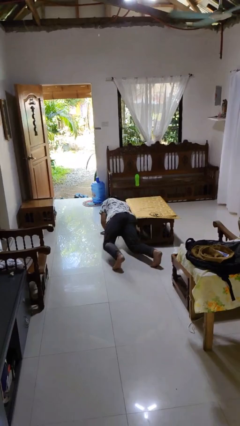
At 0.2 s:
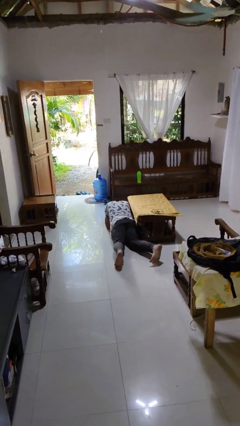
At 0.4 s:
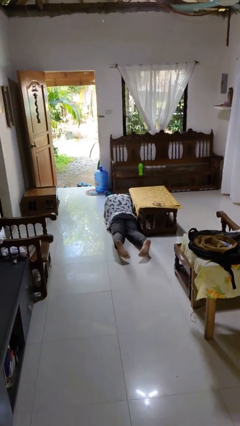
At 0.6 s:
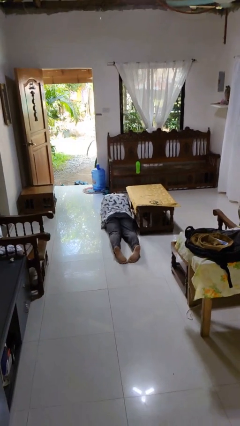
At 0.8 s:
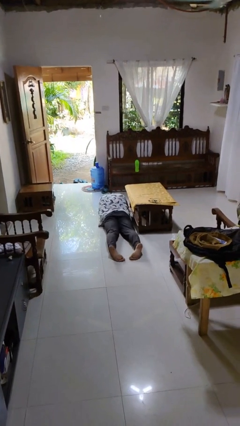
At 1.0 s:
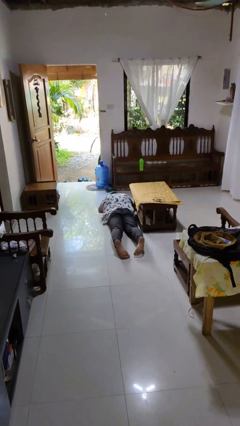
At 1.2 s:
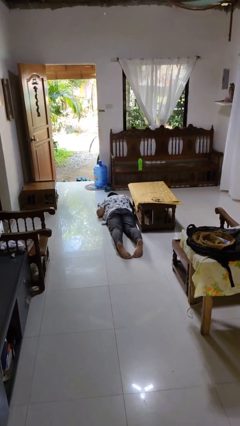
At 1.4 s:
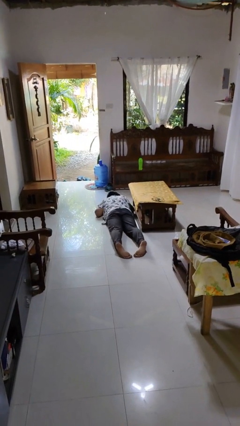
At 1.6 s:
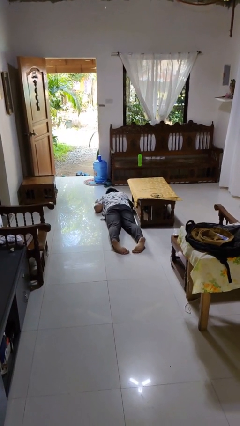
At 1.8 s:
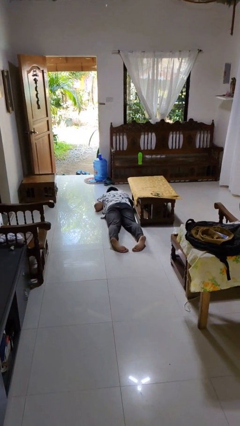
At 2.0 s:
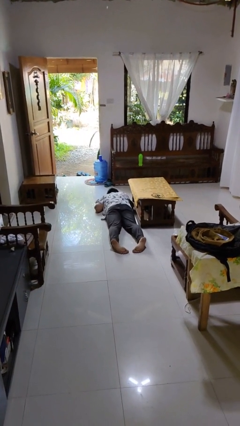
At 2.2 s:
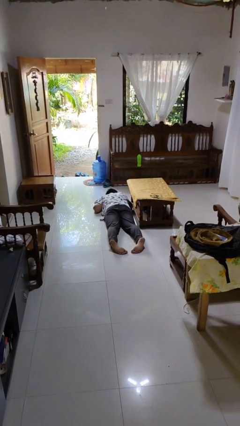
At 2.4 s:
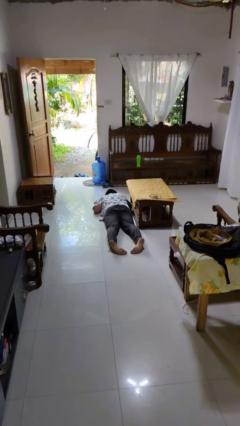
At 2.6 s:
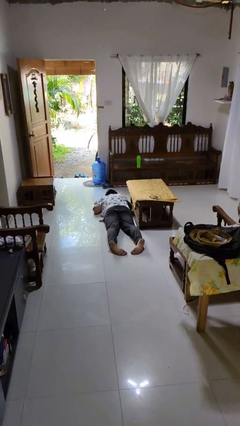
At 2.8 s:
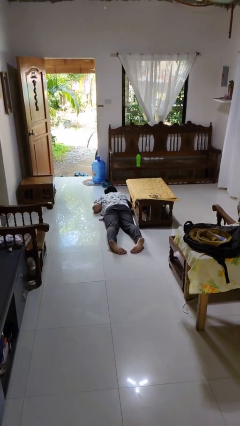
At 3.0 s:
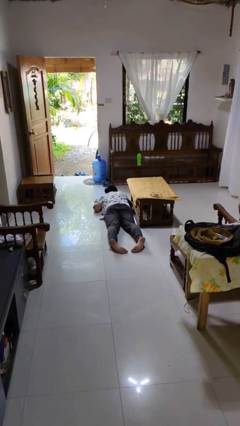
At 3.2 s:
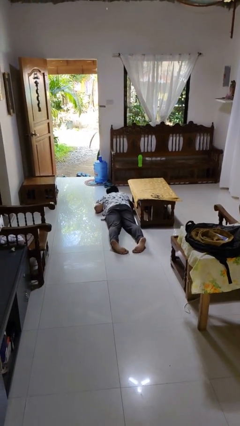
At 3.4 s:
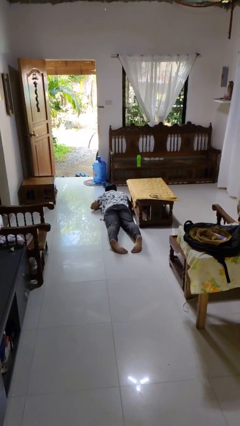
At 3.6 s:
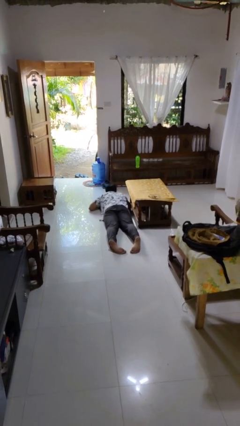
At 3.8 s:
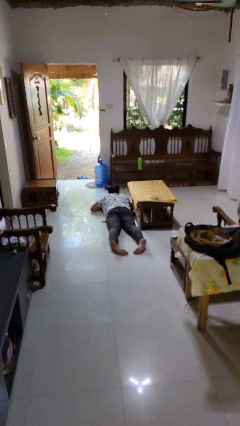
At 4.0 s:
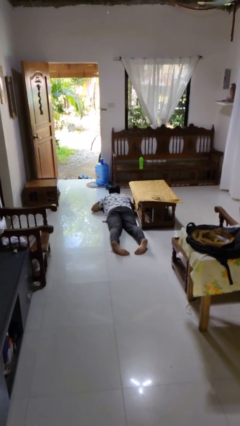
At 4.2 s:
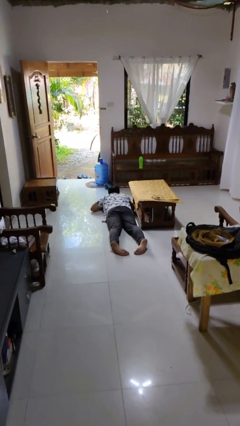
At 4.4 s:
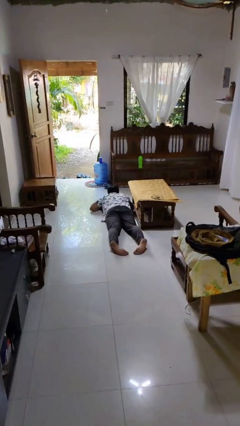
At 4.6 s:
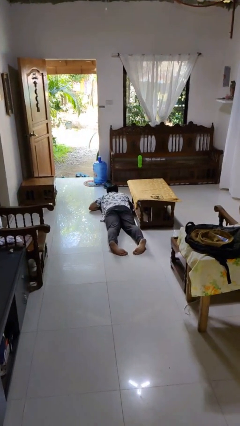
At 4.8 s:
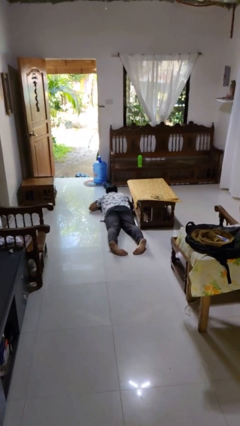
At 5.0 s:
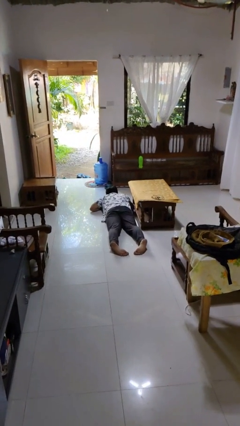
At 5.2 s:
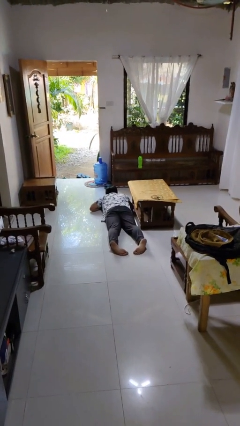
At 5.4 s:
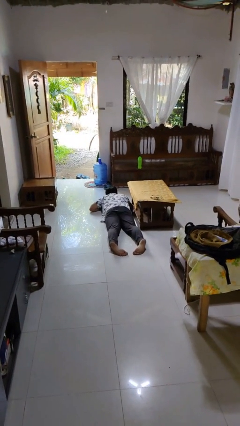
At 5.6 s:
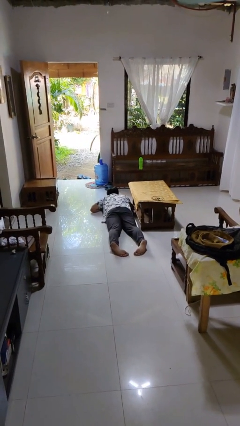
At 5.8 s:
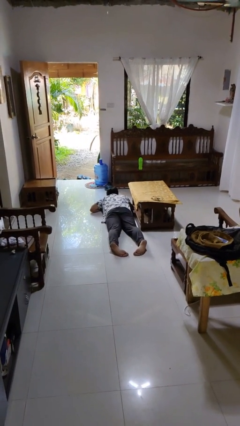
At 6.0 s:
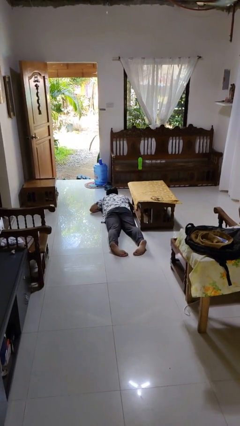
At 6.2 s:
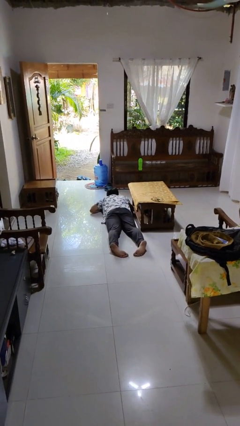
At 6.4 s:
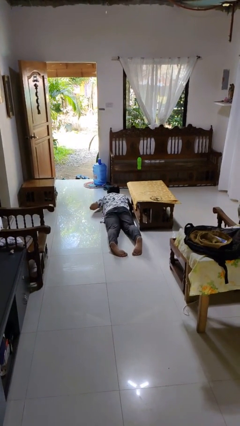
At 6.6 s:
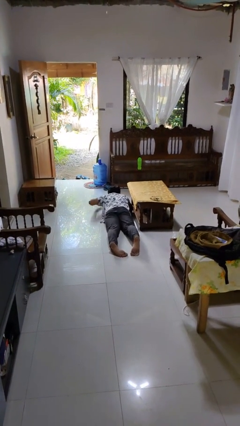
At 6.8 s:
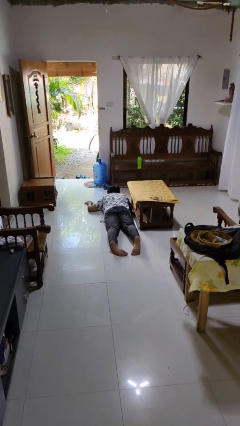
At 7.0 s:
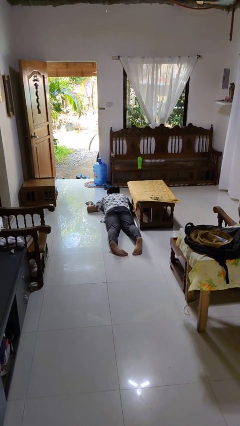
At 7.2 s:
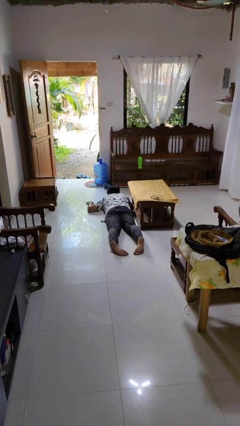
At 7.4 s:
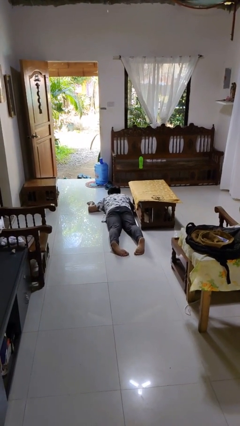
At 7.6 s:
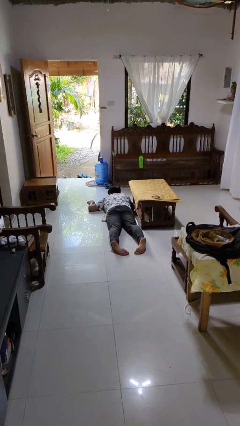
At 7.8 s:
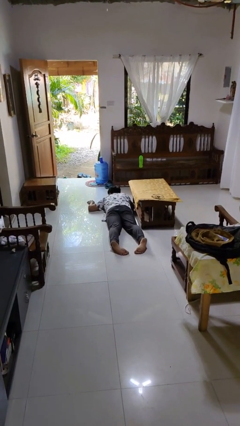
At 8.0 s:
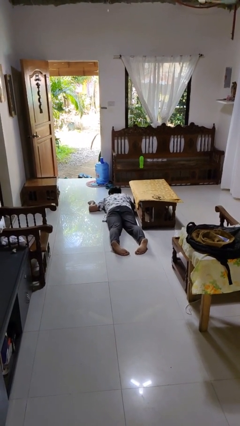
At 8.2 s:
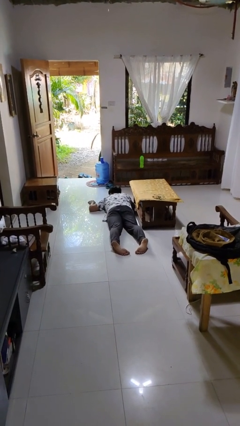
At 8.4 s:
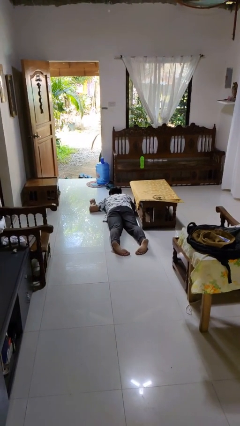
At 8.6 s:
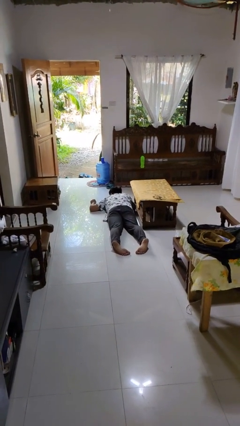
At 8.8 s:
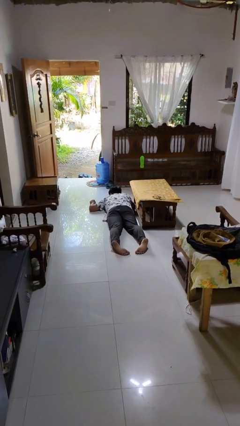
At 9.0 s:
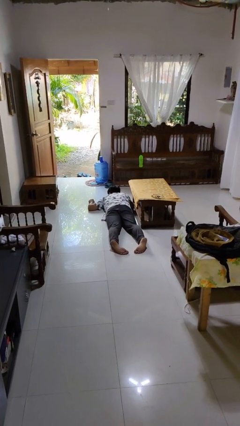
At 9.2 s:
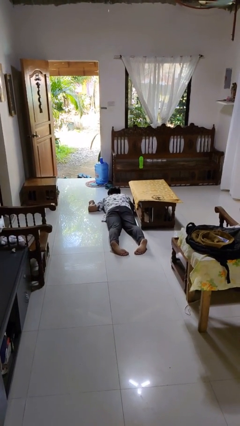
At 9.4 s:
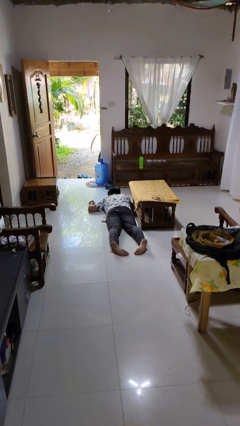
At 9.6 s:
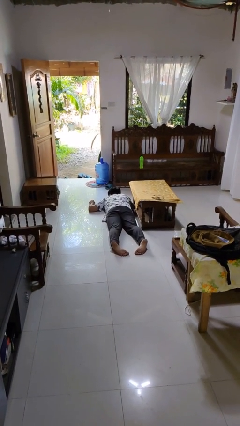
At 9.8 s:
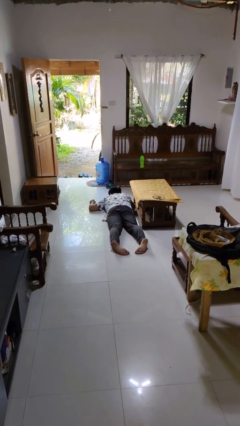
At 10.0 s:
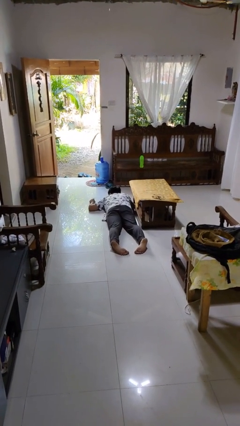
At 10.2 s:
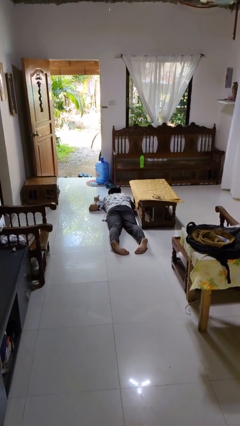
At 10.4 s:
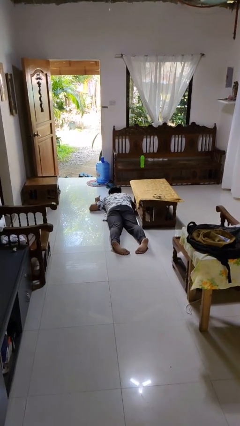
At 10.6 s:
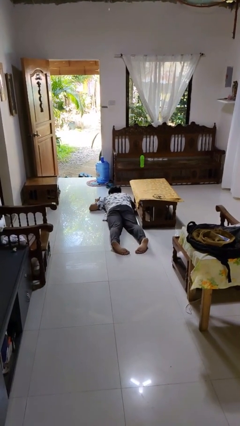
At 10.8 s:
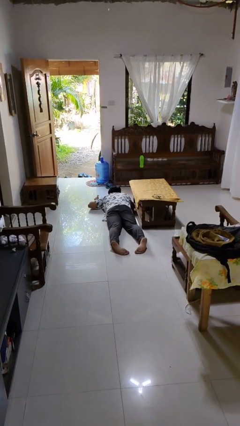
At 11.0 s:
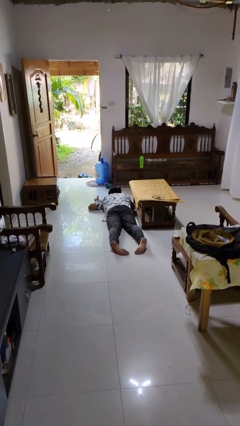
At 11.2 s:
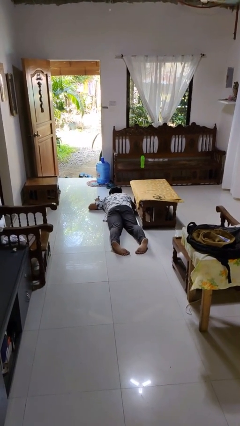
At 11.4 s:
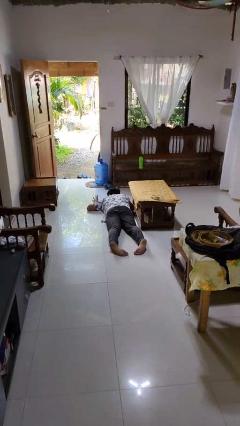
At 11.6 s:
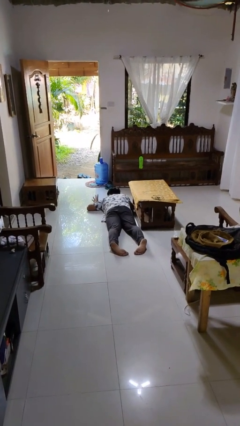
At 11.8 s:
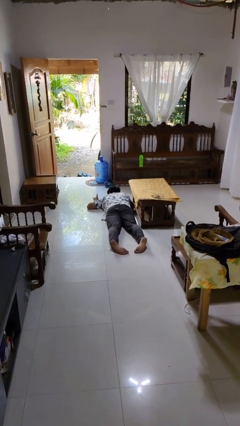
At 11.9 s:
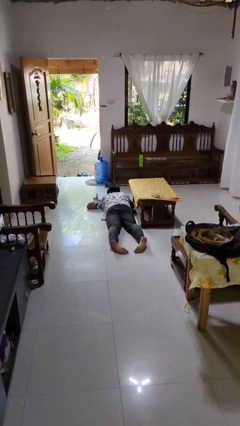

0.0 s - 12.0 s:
person lies down on floor

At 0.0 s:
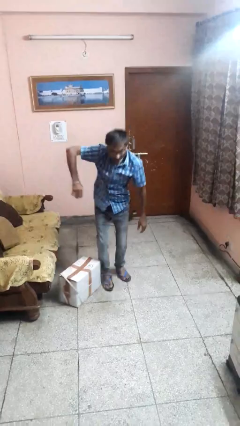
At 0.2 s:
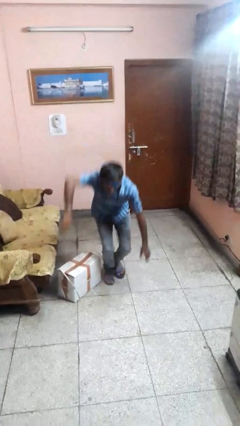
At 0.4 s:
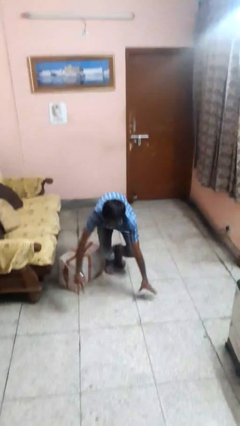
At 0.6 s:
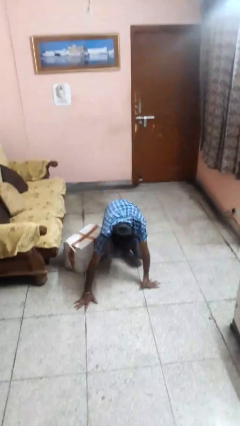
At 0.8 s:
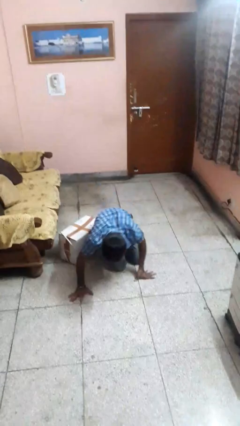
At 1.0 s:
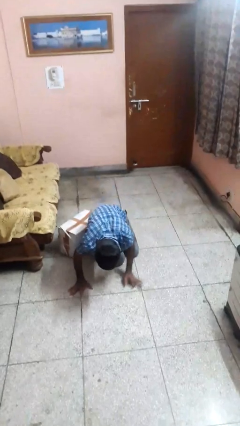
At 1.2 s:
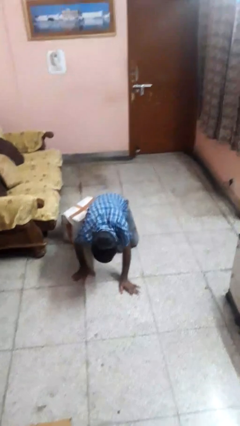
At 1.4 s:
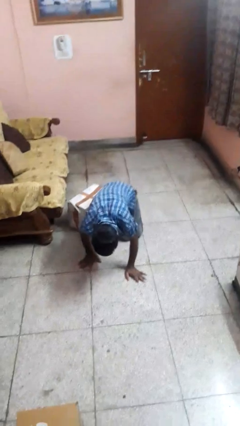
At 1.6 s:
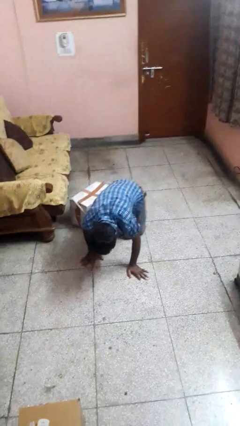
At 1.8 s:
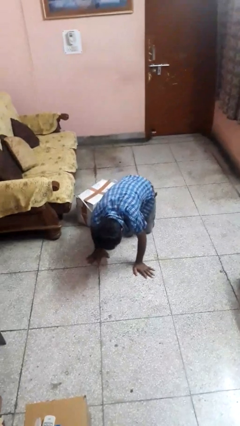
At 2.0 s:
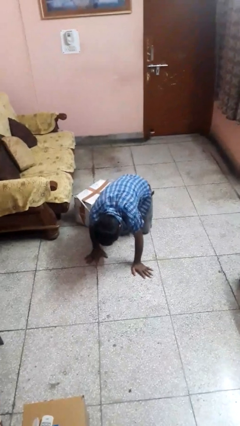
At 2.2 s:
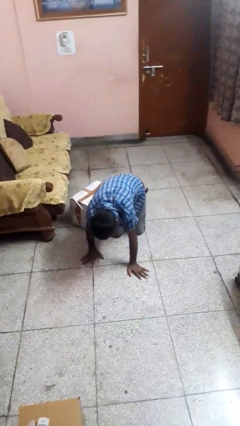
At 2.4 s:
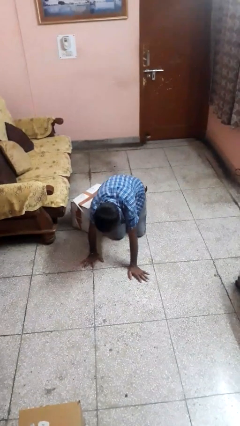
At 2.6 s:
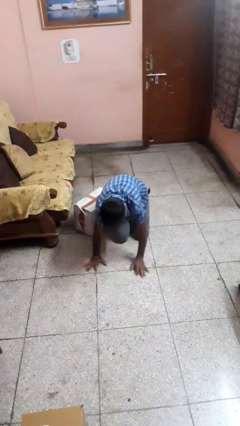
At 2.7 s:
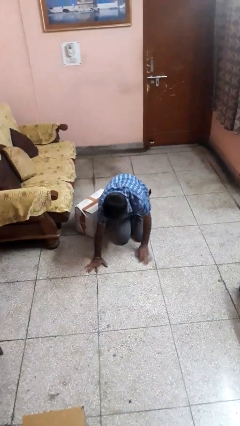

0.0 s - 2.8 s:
person trips on object on floor

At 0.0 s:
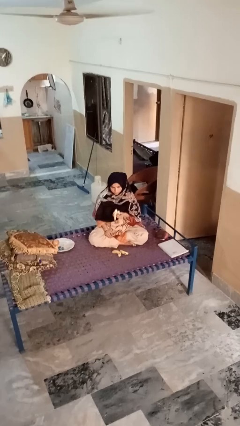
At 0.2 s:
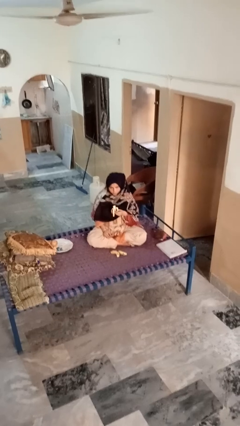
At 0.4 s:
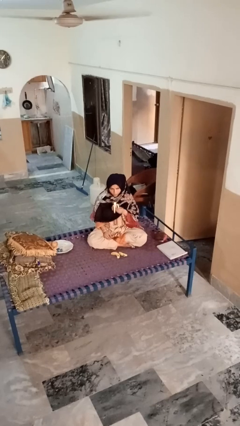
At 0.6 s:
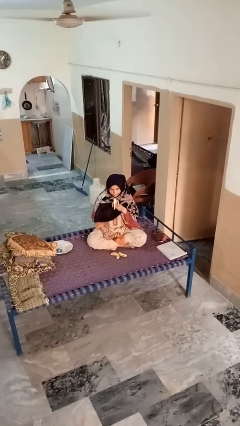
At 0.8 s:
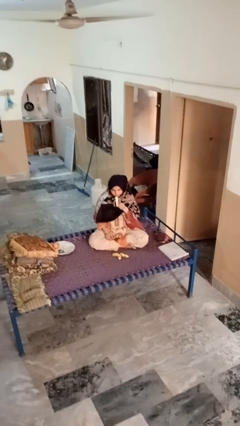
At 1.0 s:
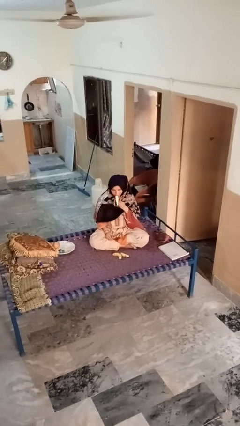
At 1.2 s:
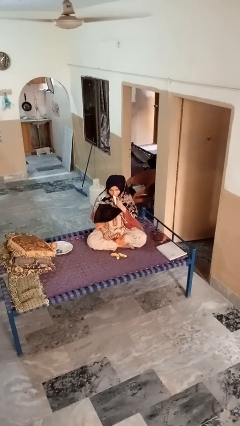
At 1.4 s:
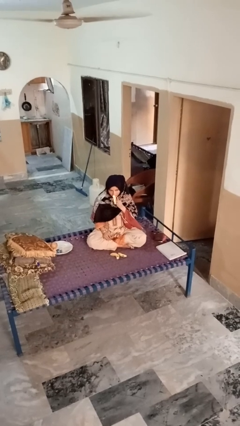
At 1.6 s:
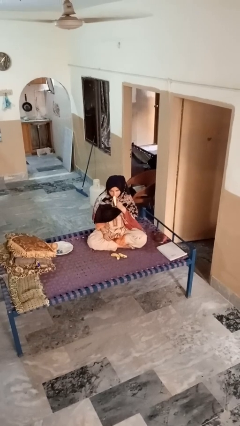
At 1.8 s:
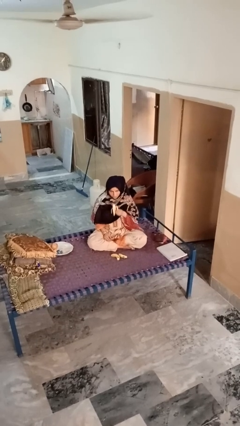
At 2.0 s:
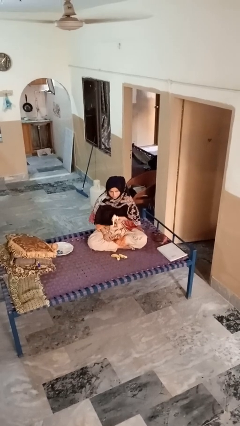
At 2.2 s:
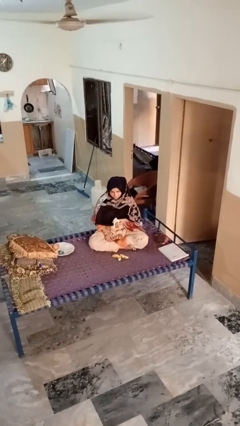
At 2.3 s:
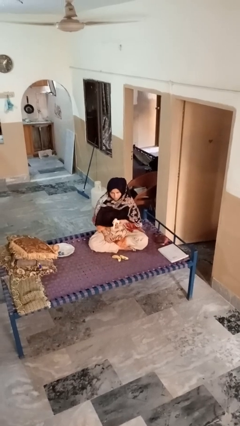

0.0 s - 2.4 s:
person eats banana

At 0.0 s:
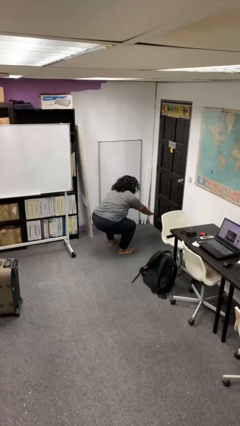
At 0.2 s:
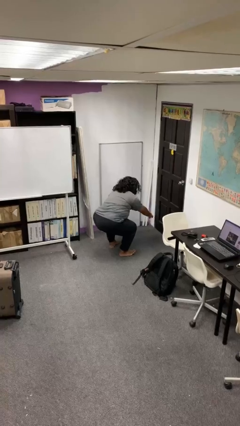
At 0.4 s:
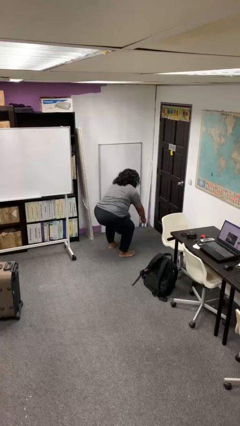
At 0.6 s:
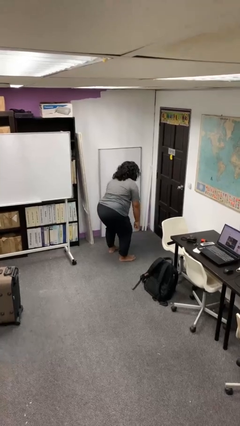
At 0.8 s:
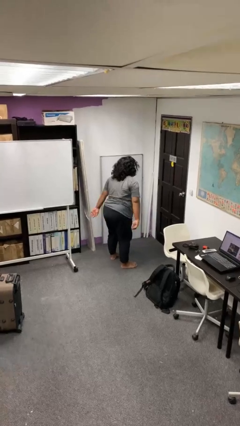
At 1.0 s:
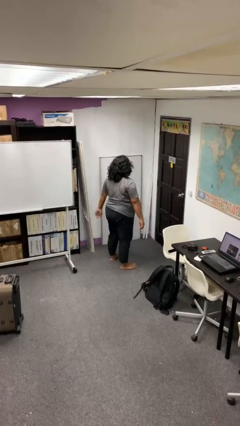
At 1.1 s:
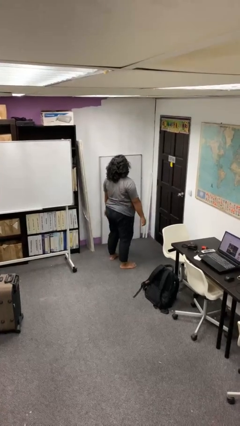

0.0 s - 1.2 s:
person stands up
